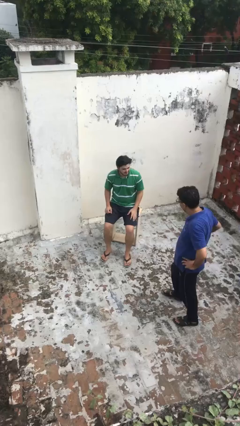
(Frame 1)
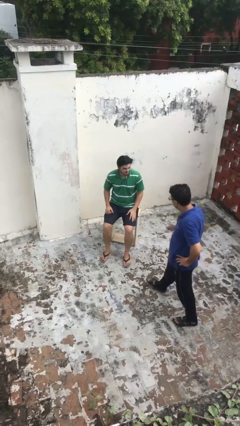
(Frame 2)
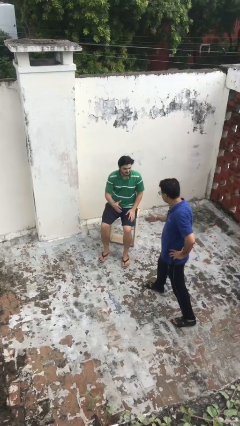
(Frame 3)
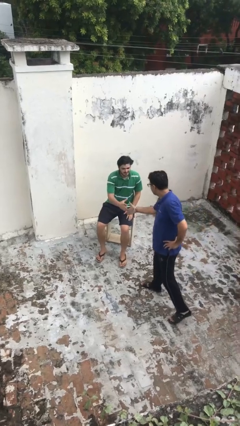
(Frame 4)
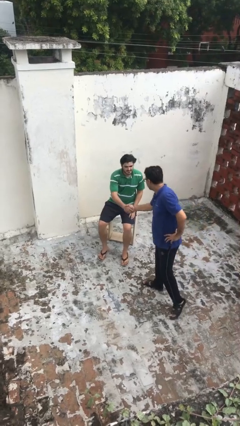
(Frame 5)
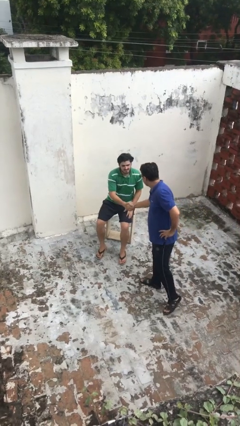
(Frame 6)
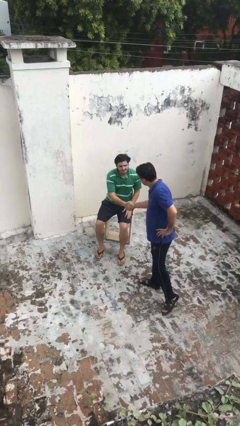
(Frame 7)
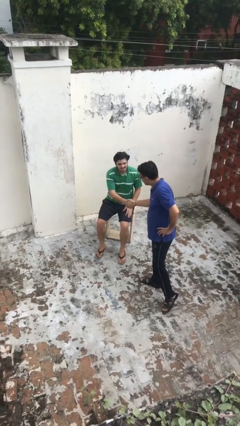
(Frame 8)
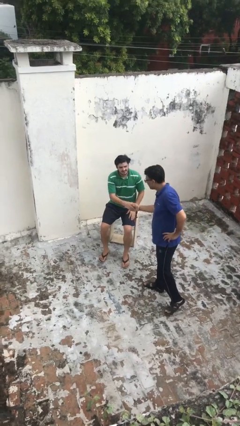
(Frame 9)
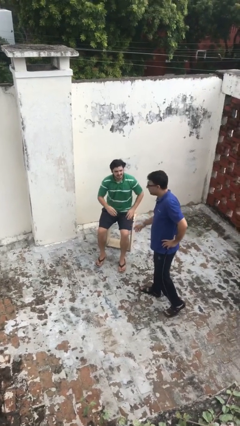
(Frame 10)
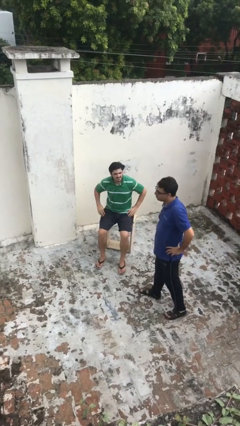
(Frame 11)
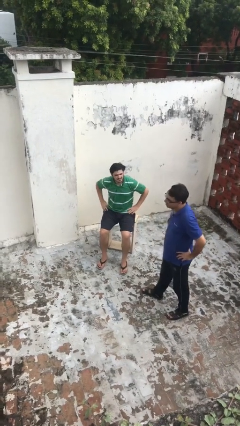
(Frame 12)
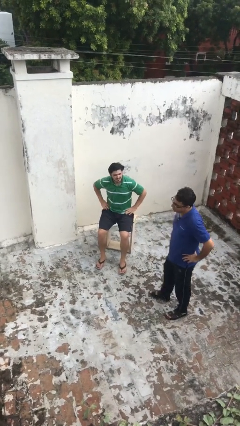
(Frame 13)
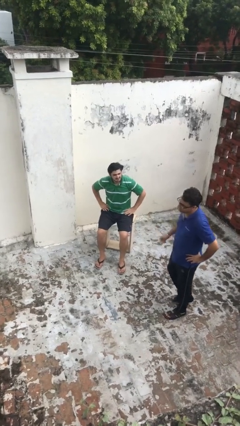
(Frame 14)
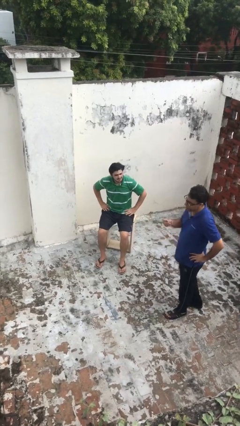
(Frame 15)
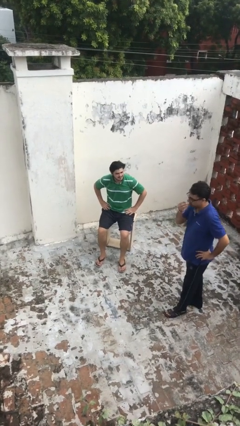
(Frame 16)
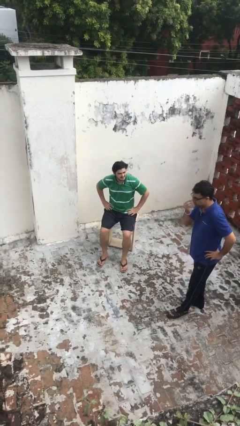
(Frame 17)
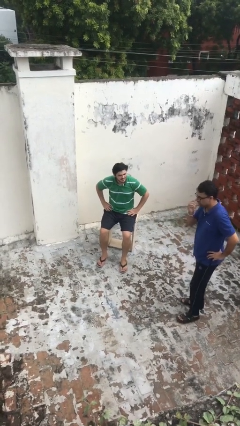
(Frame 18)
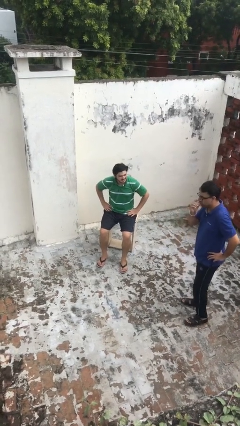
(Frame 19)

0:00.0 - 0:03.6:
person shakes hand

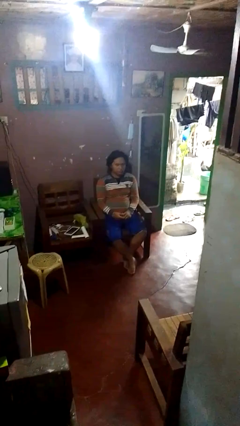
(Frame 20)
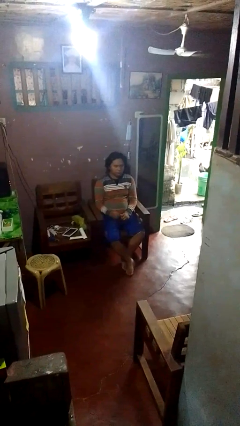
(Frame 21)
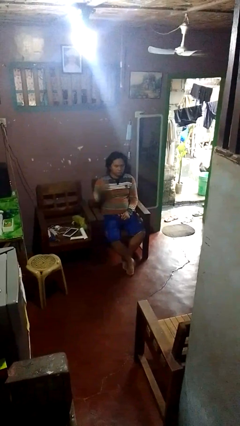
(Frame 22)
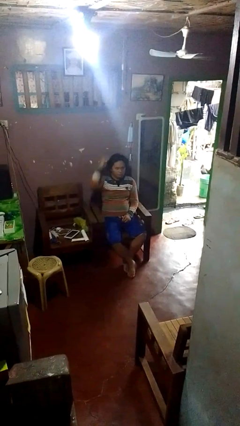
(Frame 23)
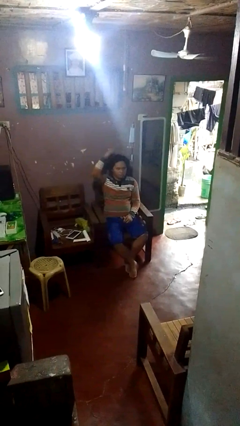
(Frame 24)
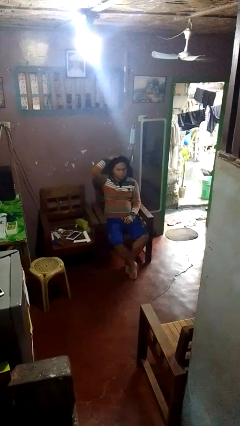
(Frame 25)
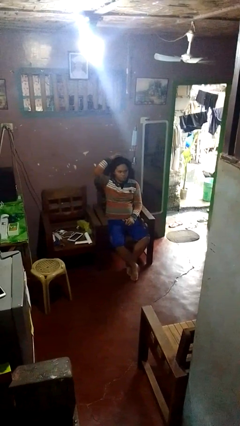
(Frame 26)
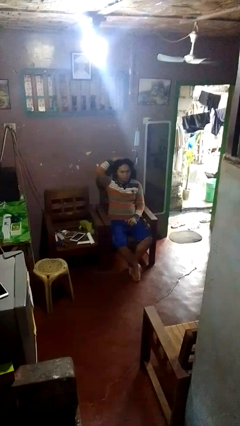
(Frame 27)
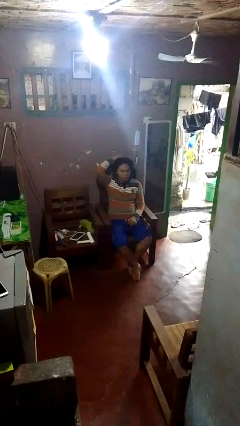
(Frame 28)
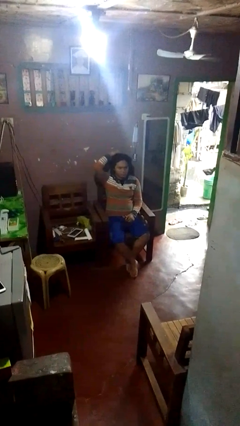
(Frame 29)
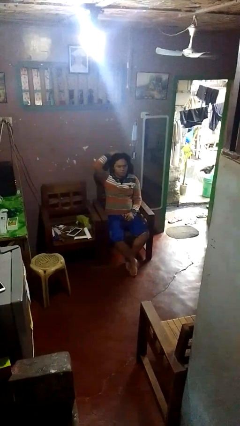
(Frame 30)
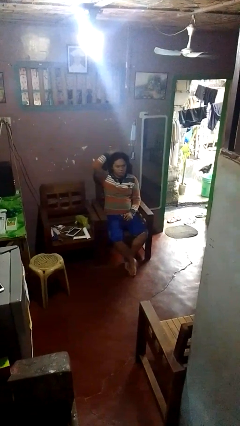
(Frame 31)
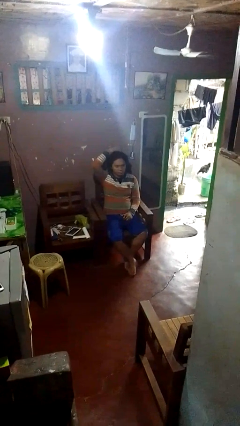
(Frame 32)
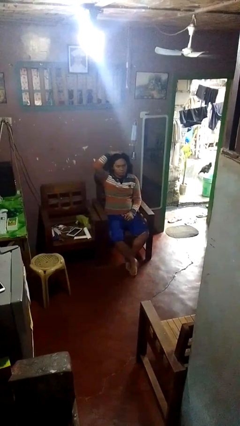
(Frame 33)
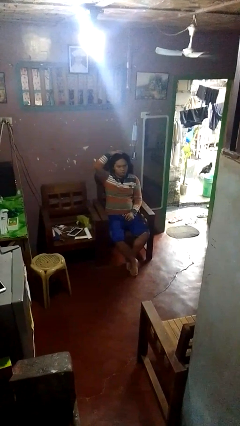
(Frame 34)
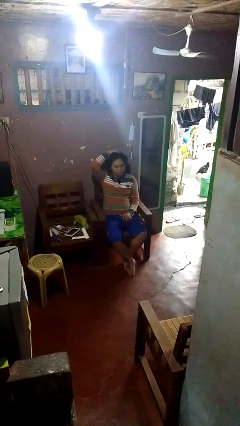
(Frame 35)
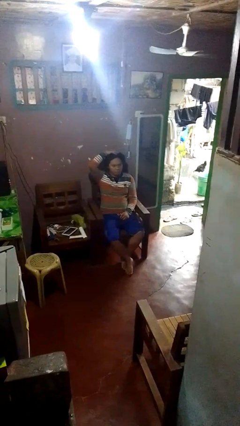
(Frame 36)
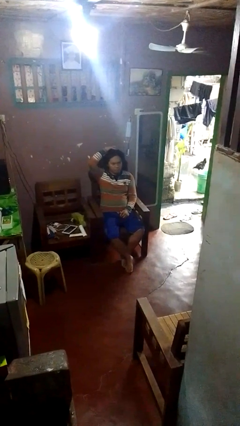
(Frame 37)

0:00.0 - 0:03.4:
person pats head

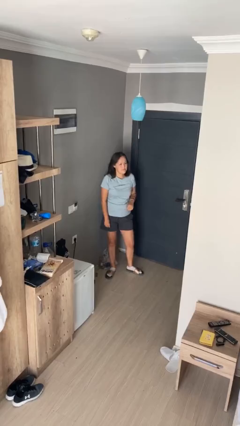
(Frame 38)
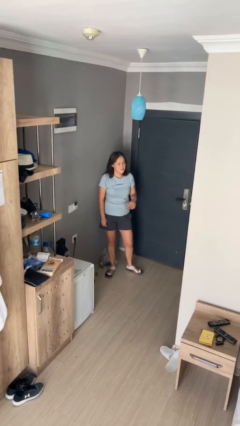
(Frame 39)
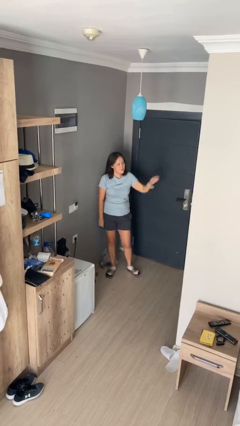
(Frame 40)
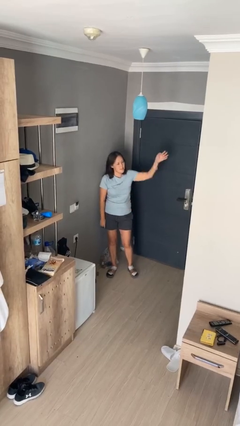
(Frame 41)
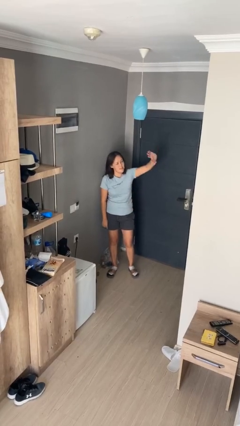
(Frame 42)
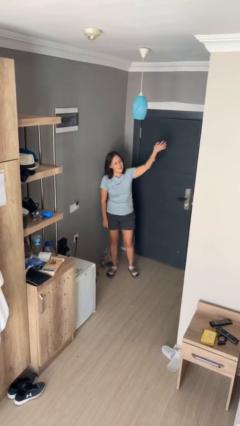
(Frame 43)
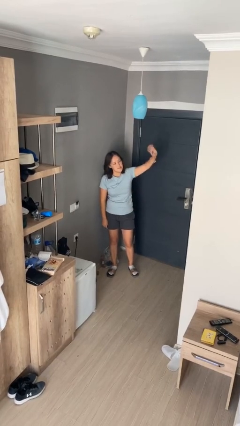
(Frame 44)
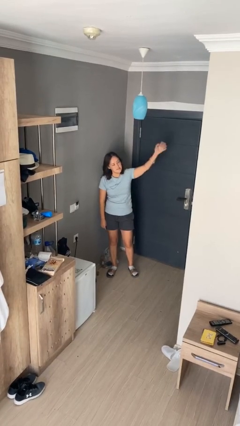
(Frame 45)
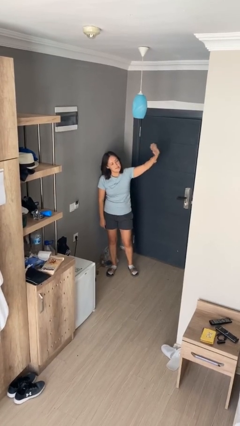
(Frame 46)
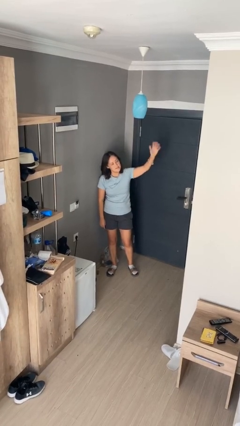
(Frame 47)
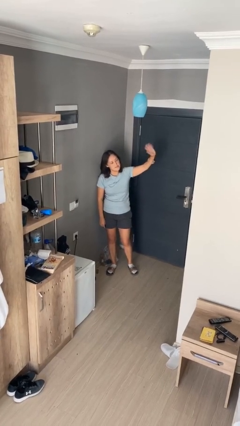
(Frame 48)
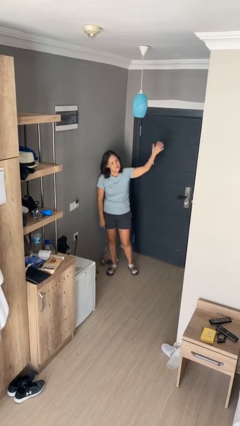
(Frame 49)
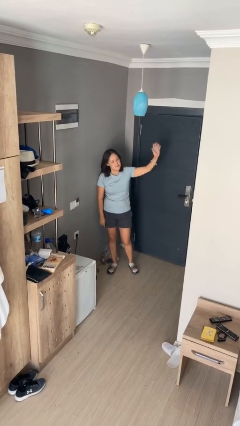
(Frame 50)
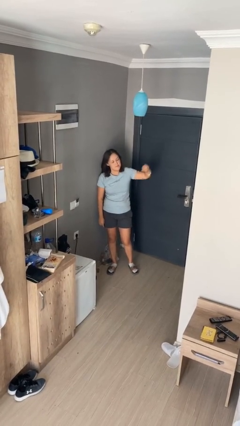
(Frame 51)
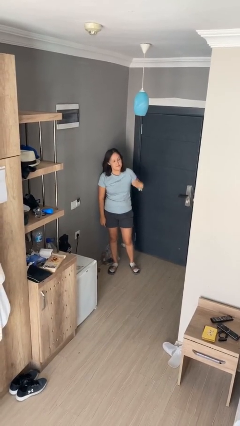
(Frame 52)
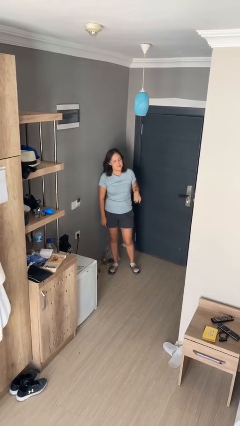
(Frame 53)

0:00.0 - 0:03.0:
person waves at person

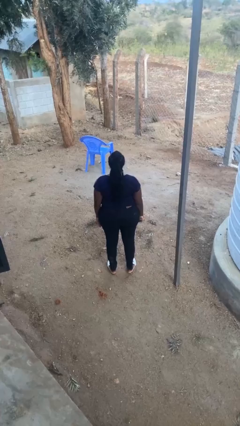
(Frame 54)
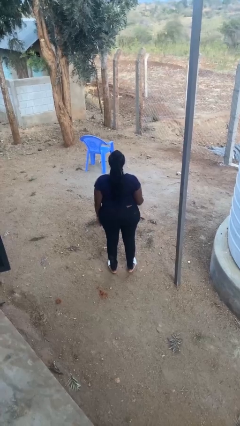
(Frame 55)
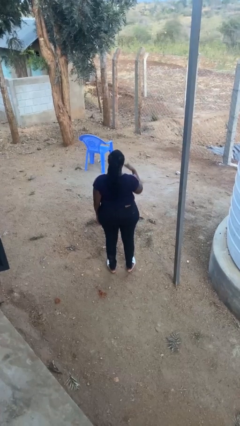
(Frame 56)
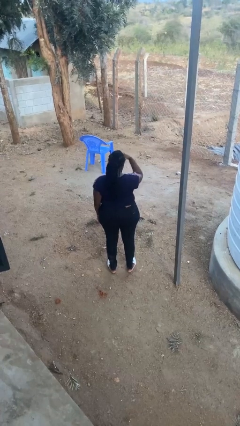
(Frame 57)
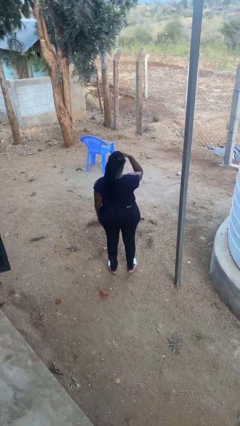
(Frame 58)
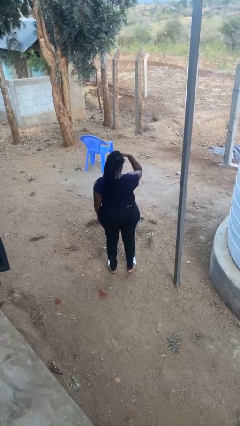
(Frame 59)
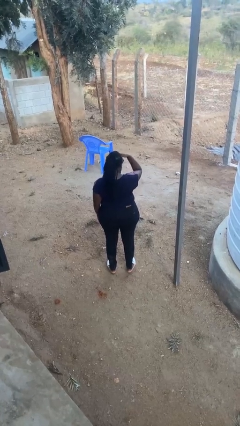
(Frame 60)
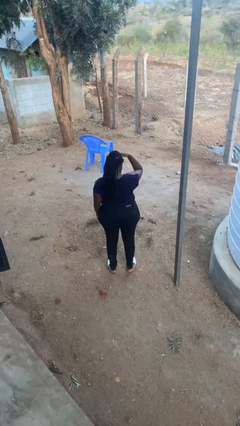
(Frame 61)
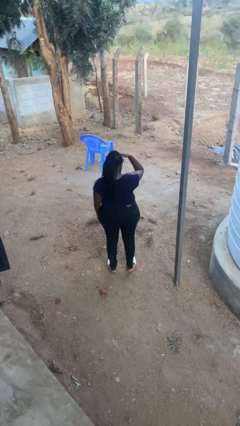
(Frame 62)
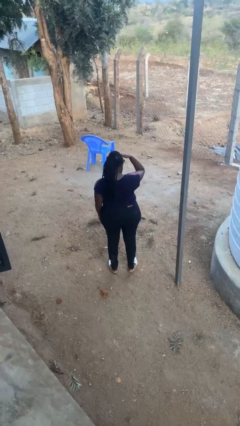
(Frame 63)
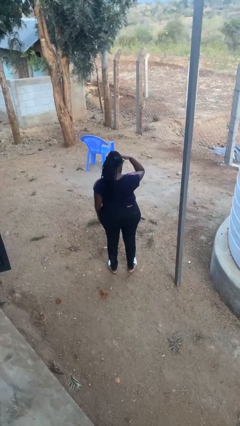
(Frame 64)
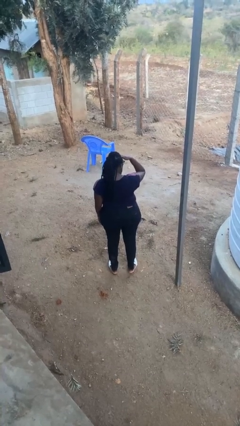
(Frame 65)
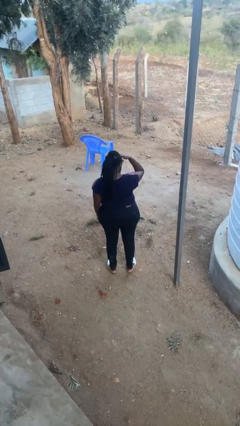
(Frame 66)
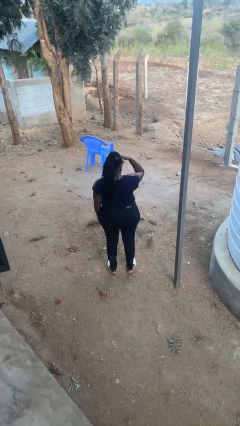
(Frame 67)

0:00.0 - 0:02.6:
person shades eyes

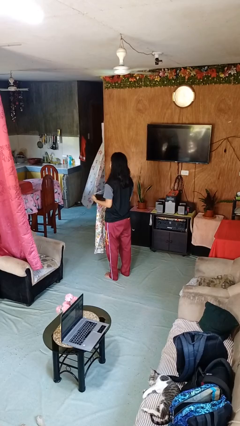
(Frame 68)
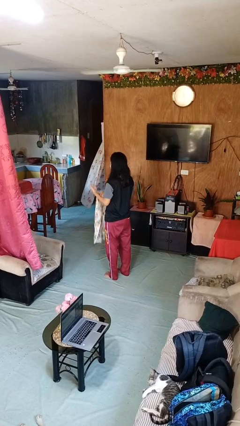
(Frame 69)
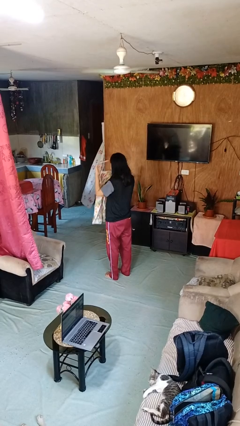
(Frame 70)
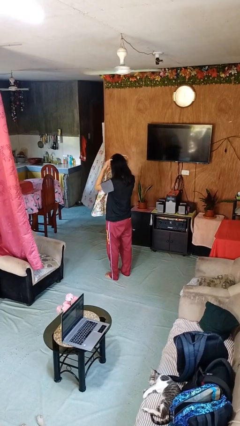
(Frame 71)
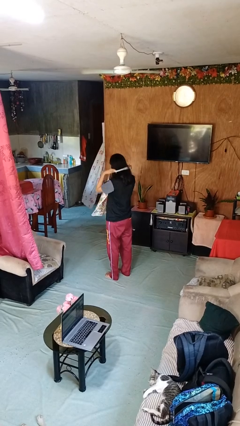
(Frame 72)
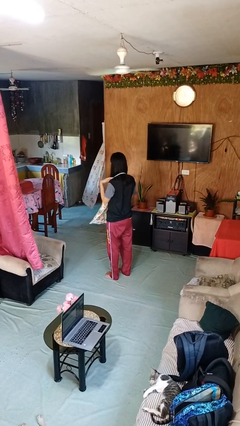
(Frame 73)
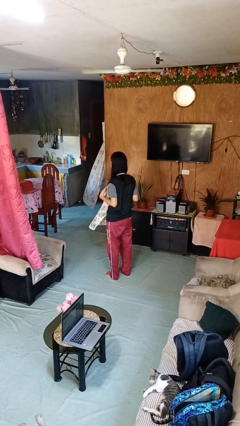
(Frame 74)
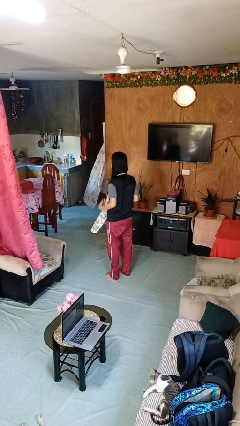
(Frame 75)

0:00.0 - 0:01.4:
person puts on apron

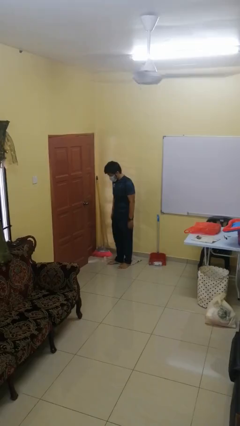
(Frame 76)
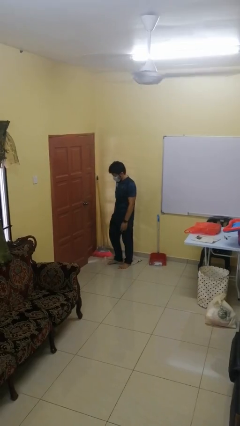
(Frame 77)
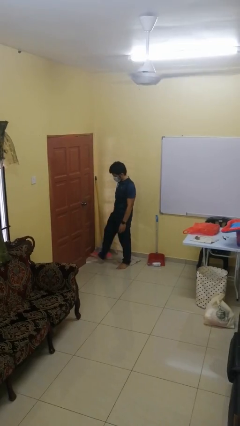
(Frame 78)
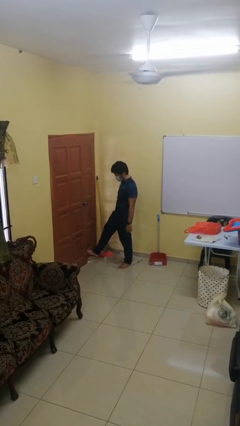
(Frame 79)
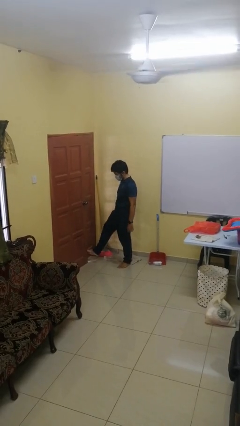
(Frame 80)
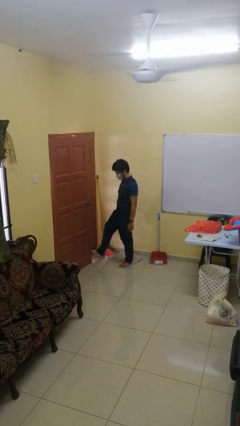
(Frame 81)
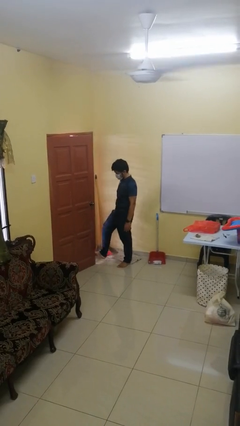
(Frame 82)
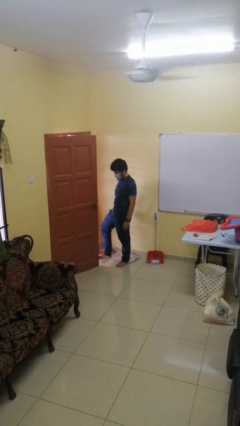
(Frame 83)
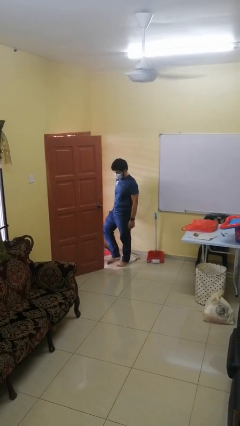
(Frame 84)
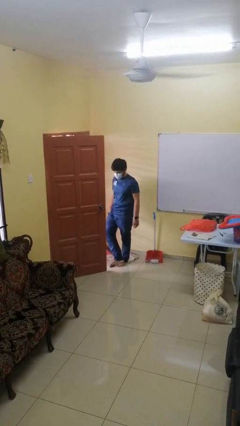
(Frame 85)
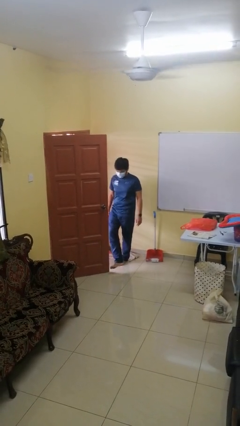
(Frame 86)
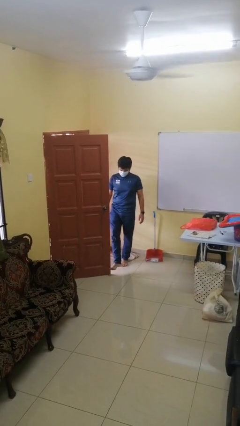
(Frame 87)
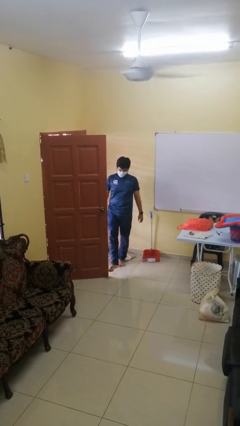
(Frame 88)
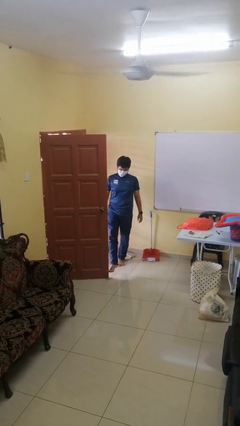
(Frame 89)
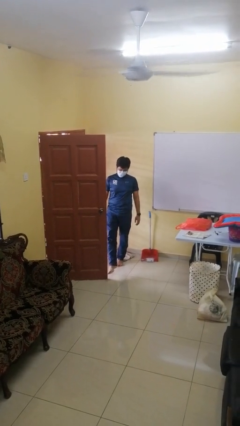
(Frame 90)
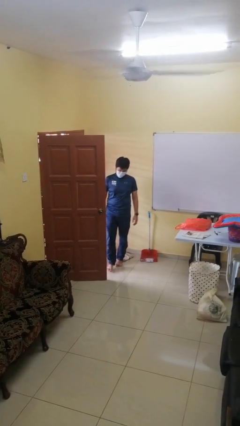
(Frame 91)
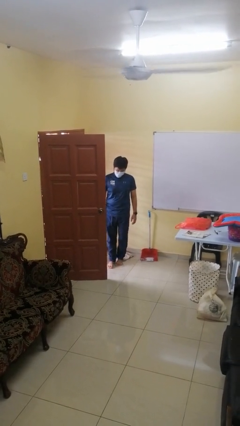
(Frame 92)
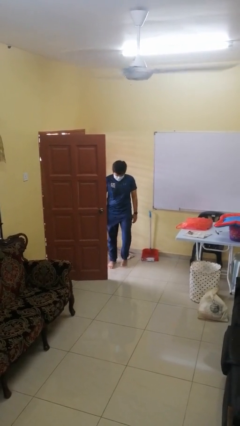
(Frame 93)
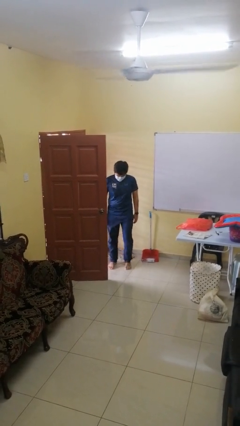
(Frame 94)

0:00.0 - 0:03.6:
person opens facility door
